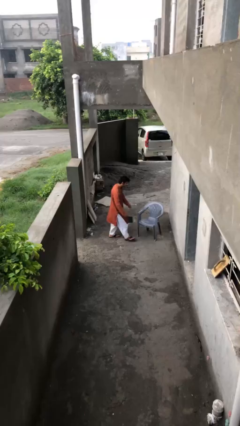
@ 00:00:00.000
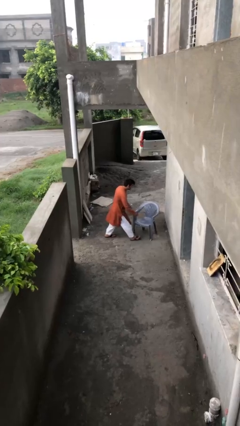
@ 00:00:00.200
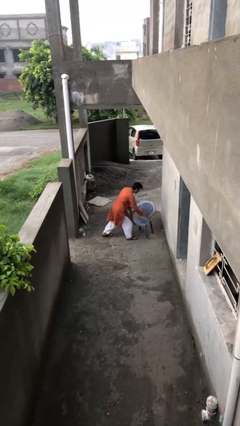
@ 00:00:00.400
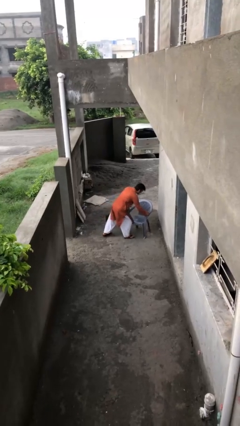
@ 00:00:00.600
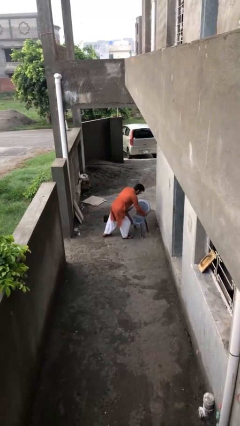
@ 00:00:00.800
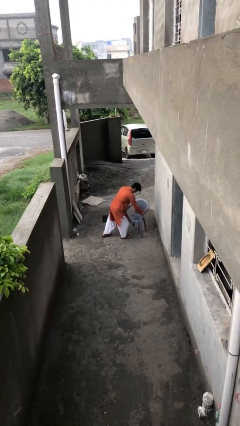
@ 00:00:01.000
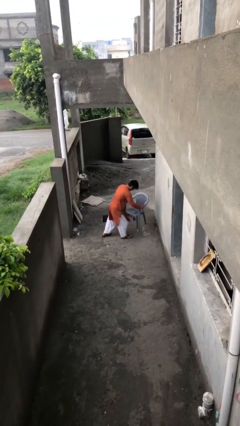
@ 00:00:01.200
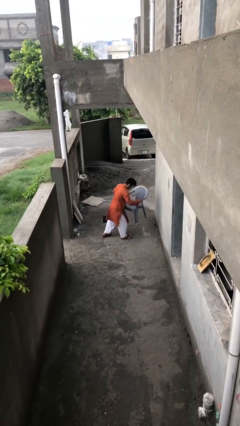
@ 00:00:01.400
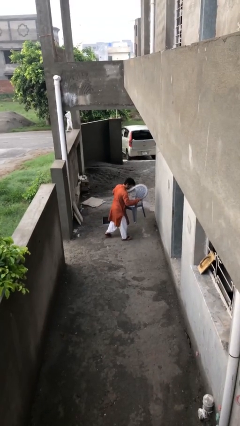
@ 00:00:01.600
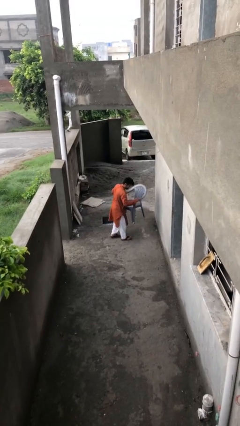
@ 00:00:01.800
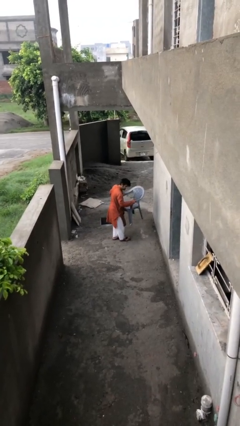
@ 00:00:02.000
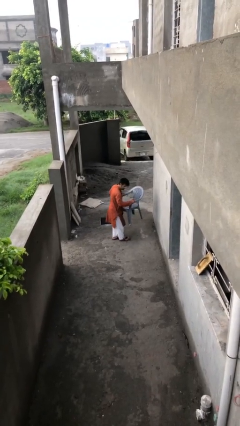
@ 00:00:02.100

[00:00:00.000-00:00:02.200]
person picks up object from floor

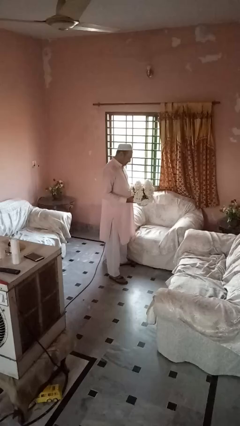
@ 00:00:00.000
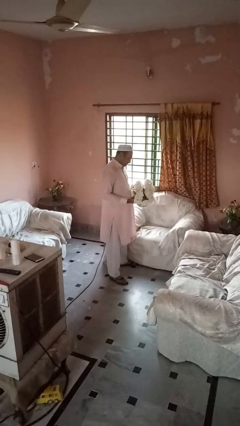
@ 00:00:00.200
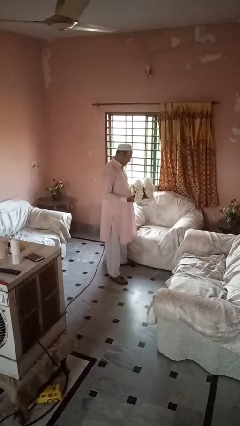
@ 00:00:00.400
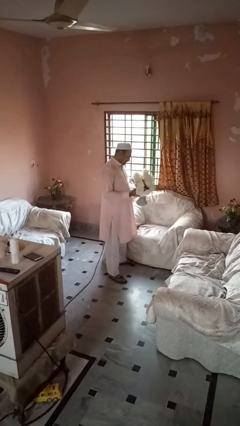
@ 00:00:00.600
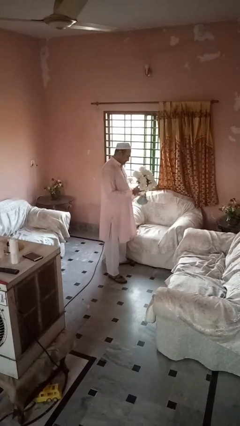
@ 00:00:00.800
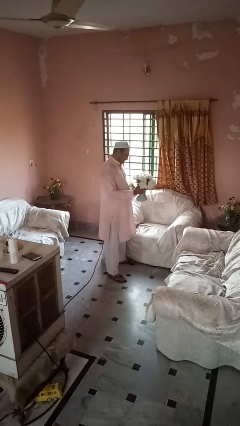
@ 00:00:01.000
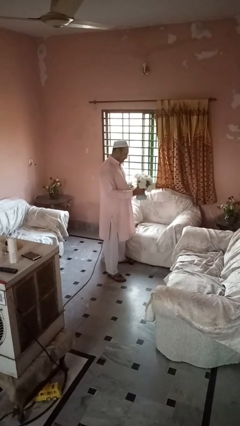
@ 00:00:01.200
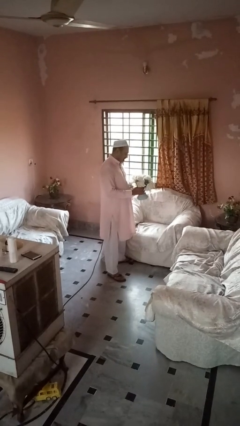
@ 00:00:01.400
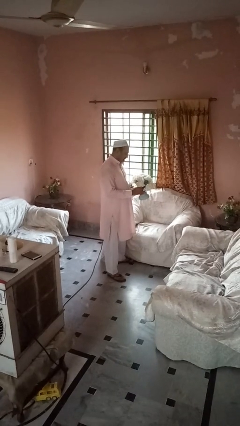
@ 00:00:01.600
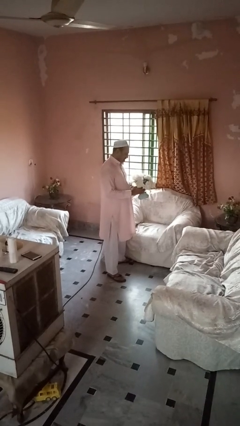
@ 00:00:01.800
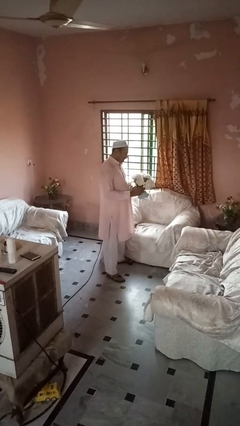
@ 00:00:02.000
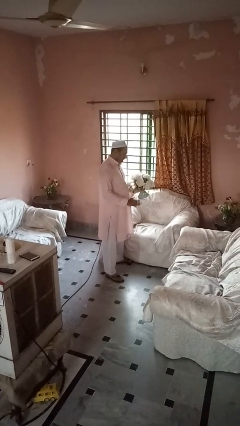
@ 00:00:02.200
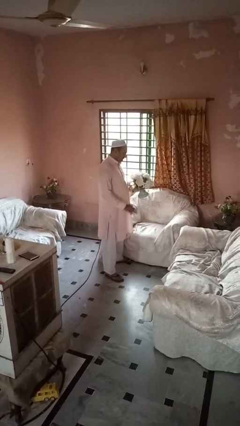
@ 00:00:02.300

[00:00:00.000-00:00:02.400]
person arranges flowers in vase

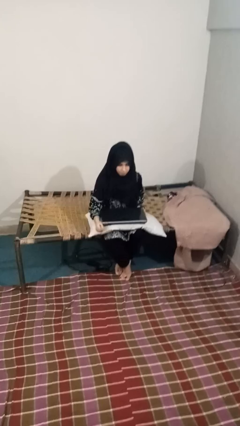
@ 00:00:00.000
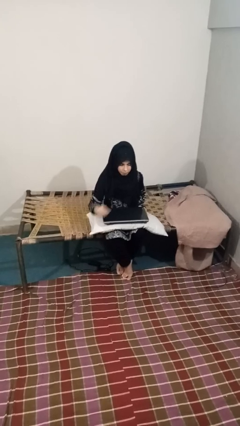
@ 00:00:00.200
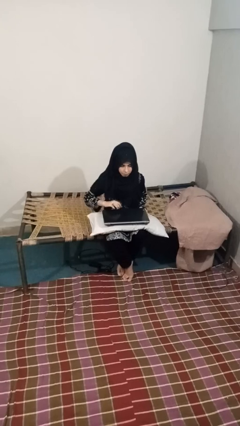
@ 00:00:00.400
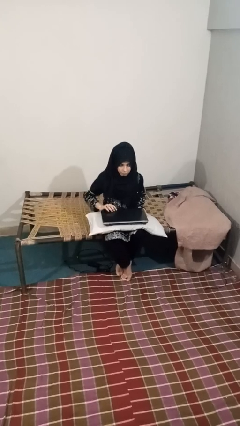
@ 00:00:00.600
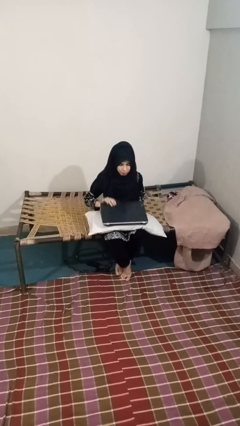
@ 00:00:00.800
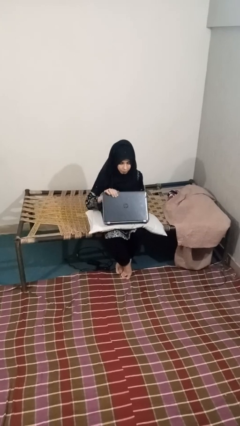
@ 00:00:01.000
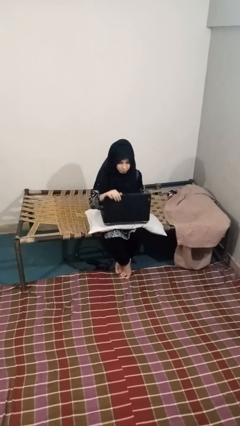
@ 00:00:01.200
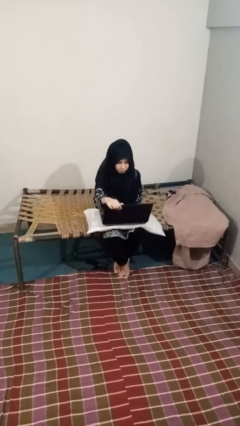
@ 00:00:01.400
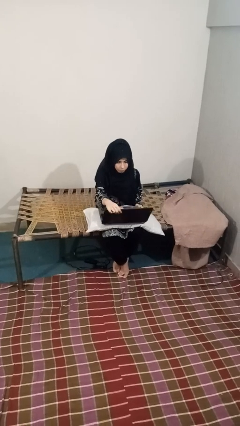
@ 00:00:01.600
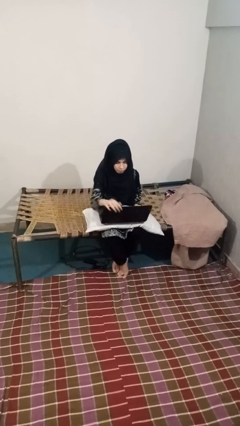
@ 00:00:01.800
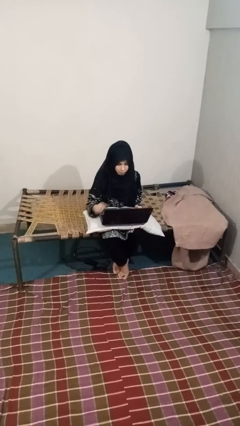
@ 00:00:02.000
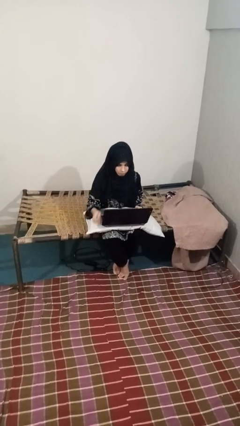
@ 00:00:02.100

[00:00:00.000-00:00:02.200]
person opens laptop

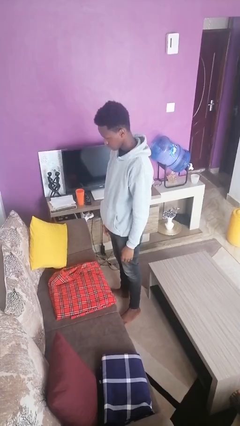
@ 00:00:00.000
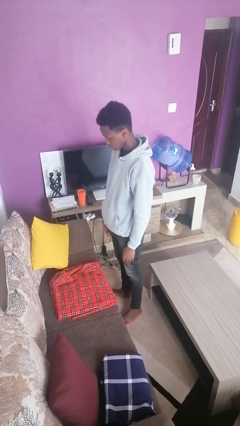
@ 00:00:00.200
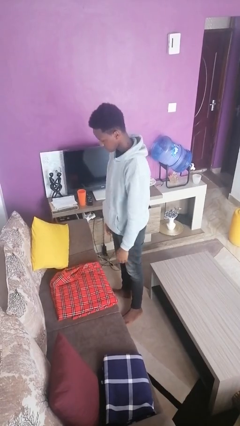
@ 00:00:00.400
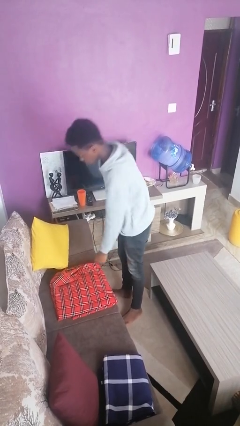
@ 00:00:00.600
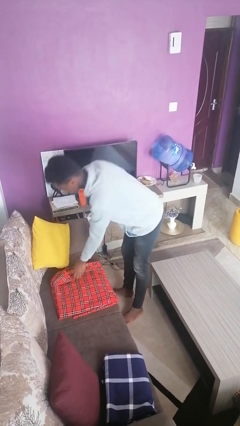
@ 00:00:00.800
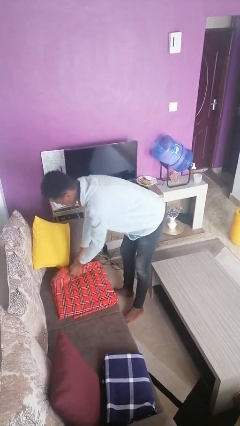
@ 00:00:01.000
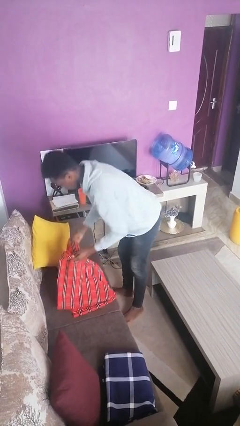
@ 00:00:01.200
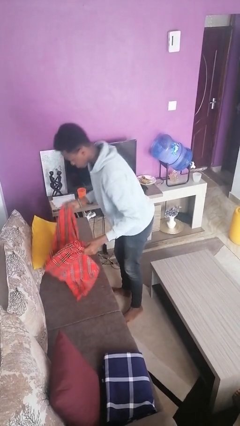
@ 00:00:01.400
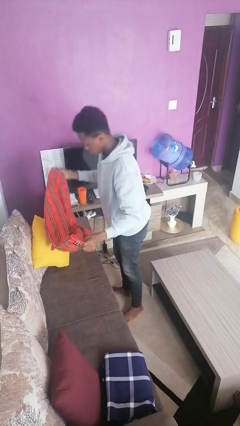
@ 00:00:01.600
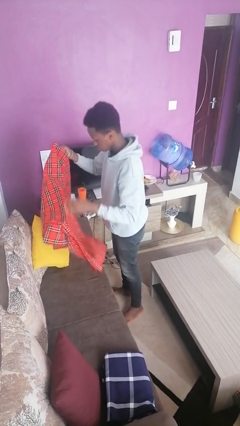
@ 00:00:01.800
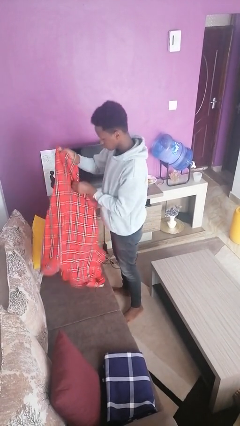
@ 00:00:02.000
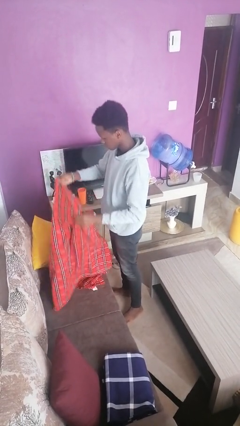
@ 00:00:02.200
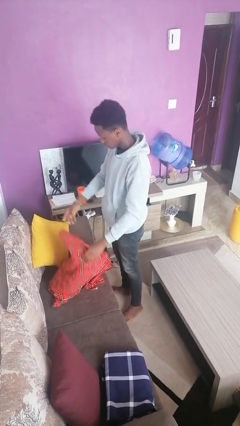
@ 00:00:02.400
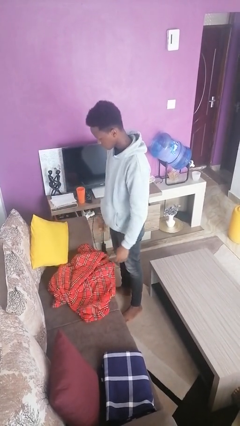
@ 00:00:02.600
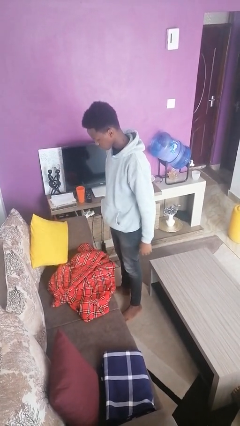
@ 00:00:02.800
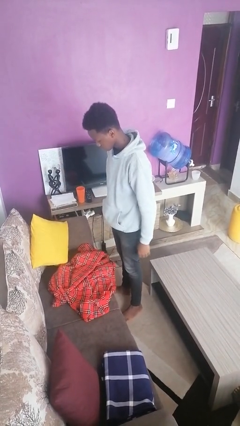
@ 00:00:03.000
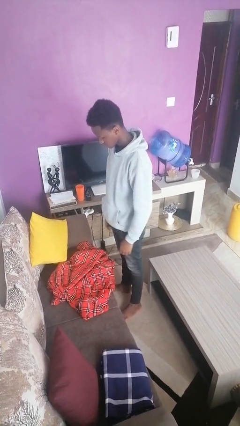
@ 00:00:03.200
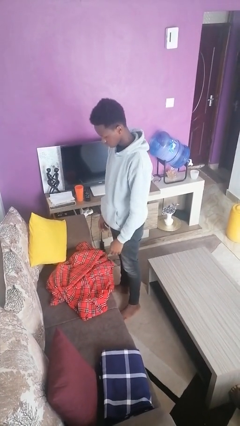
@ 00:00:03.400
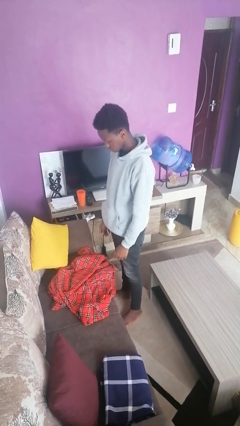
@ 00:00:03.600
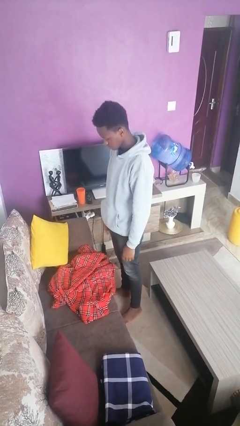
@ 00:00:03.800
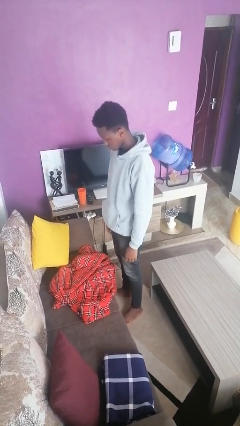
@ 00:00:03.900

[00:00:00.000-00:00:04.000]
person unfolds blanket

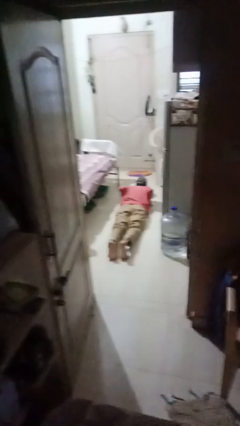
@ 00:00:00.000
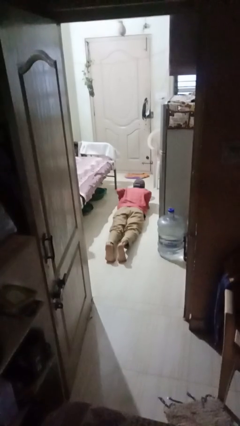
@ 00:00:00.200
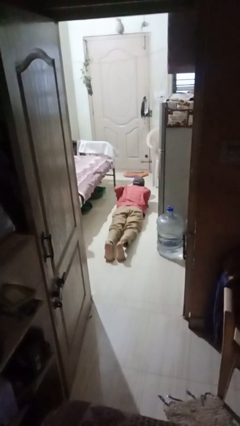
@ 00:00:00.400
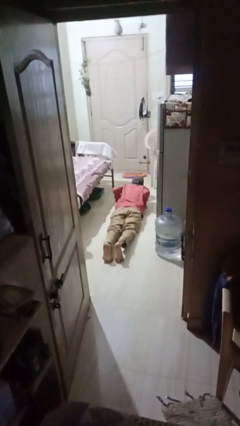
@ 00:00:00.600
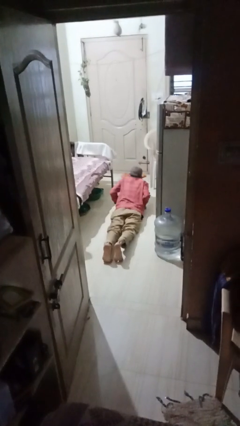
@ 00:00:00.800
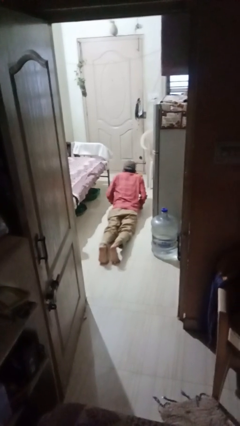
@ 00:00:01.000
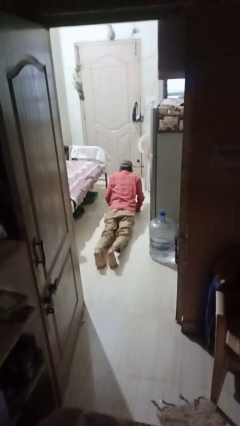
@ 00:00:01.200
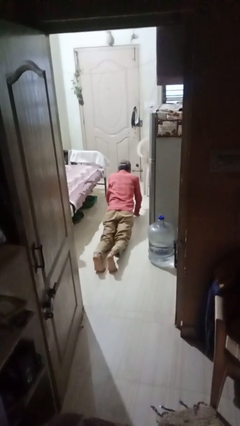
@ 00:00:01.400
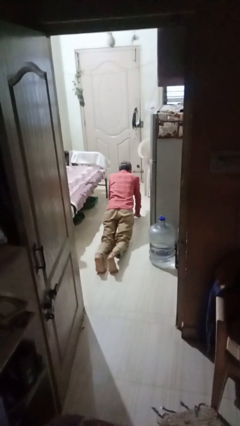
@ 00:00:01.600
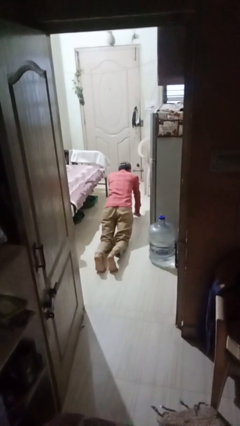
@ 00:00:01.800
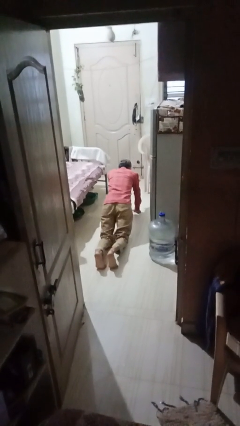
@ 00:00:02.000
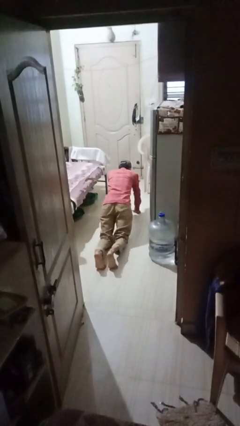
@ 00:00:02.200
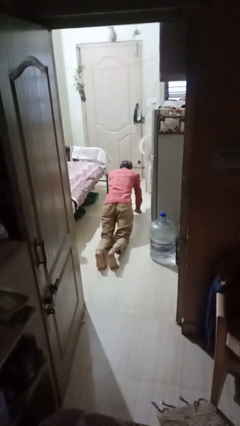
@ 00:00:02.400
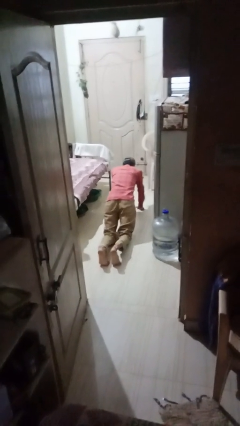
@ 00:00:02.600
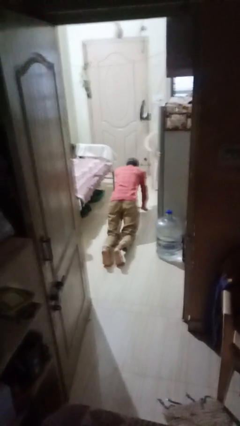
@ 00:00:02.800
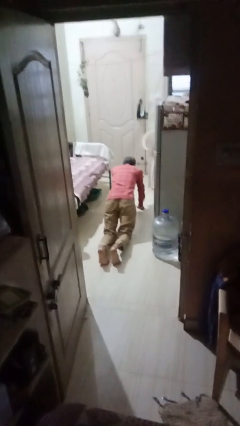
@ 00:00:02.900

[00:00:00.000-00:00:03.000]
person exercises with pushup

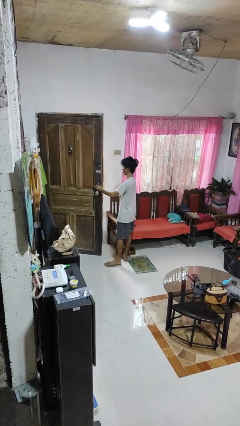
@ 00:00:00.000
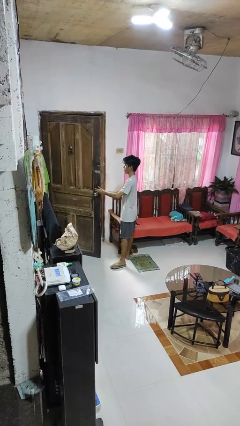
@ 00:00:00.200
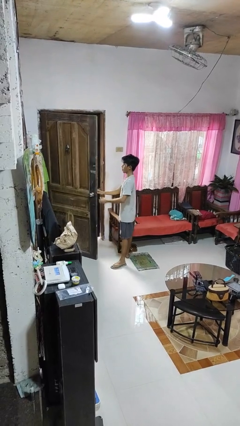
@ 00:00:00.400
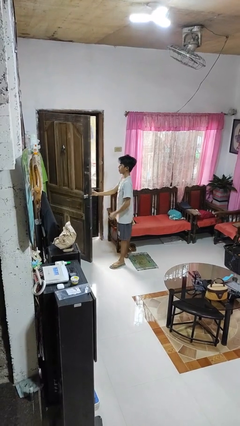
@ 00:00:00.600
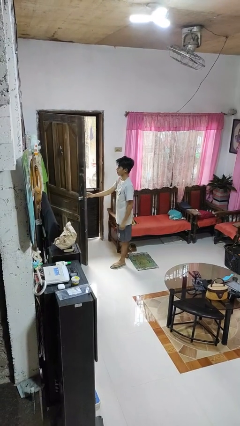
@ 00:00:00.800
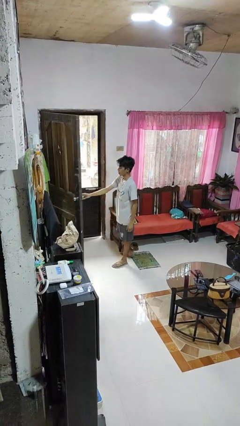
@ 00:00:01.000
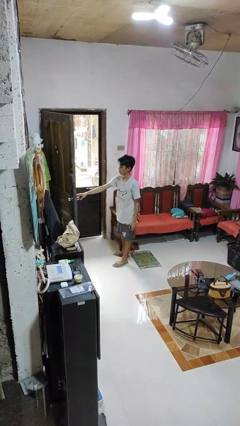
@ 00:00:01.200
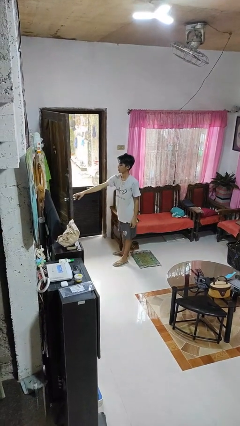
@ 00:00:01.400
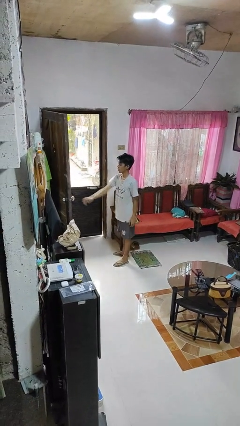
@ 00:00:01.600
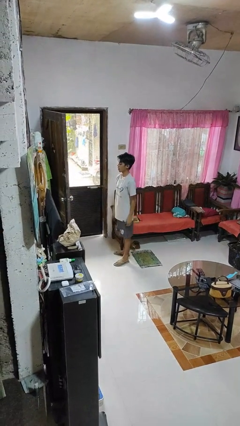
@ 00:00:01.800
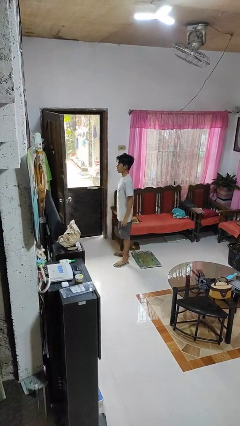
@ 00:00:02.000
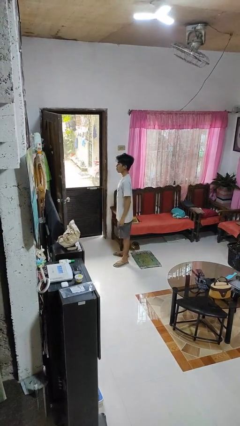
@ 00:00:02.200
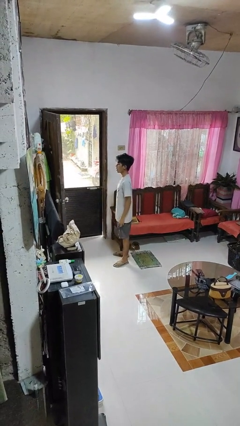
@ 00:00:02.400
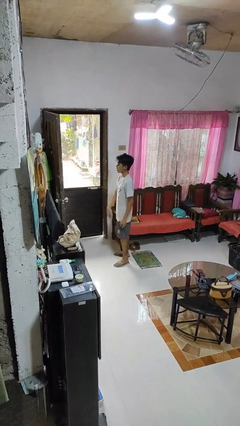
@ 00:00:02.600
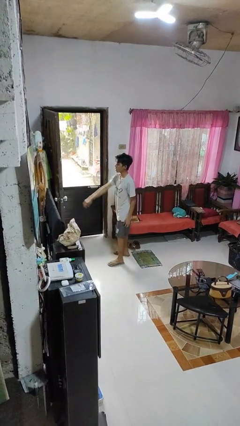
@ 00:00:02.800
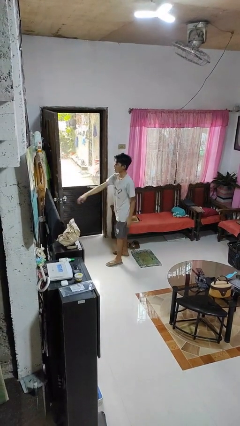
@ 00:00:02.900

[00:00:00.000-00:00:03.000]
person opens facility door
